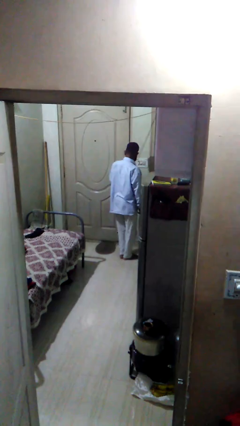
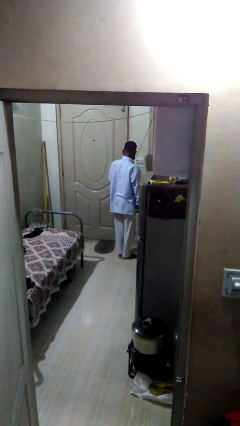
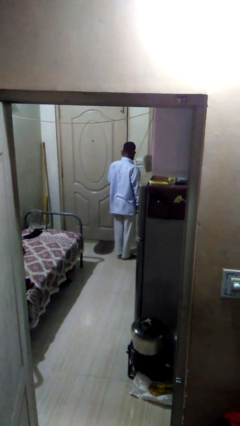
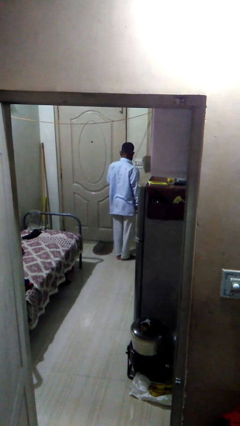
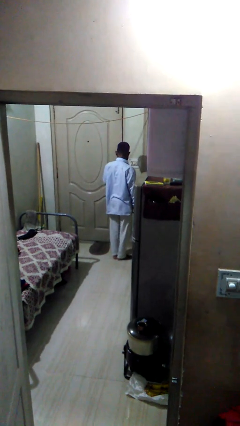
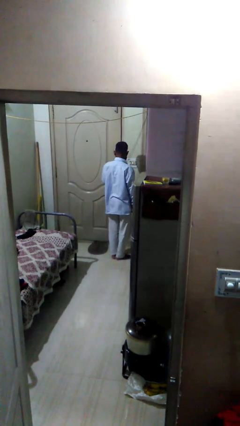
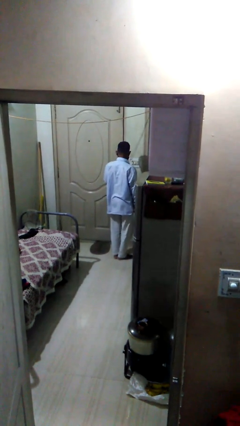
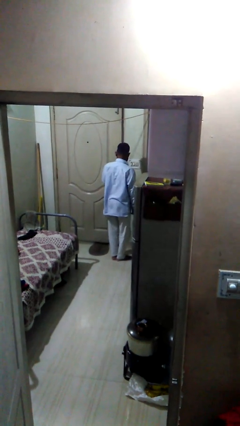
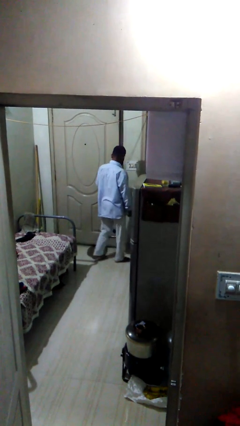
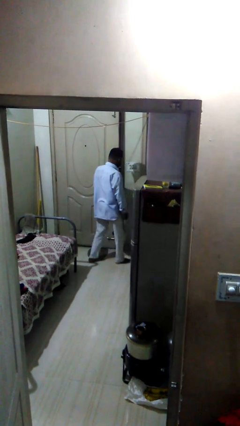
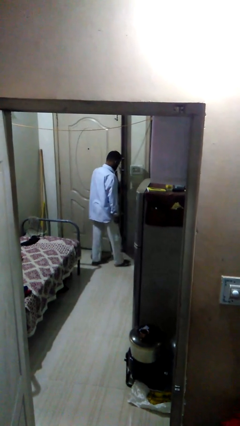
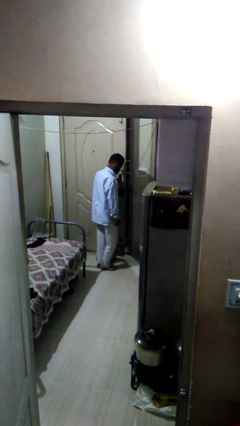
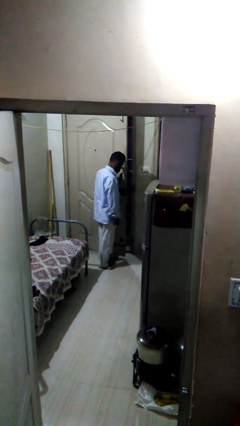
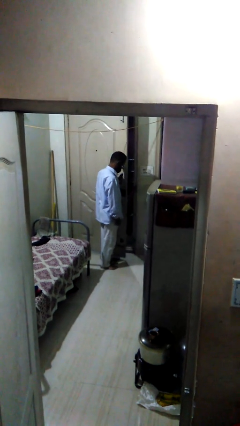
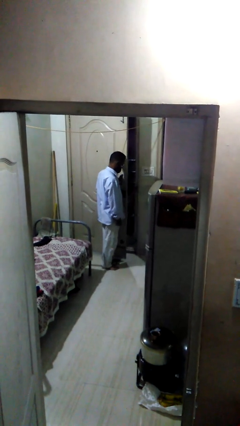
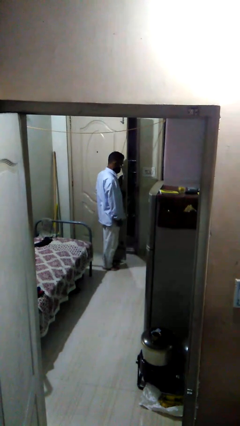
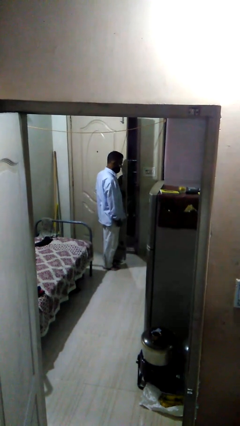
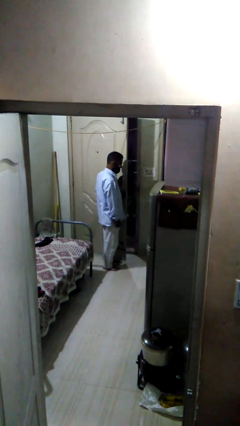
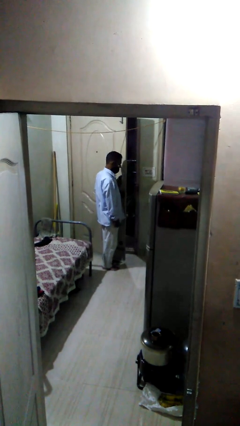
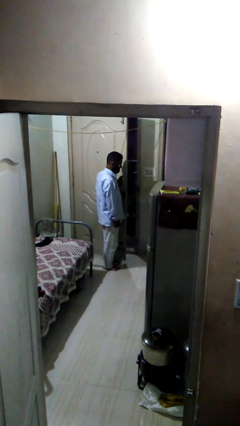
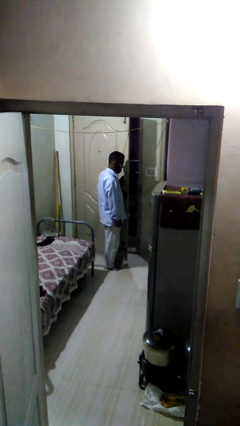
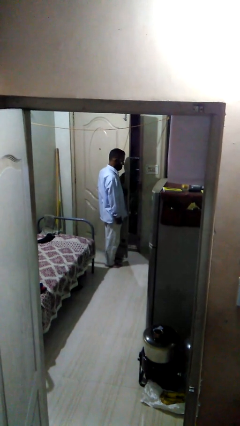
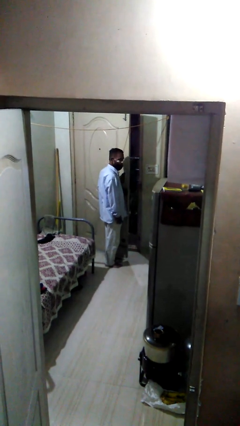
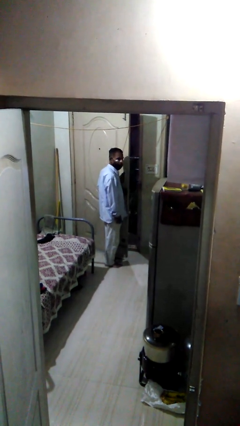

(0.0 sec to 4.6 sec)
person opens facility door

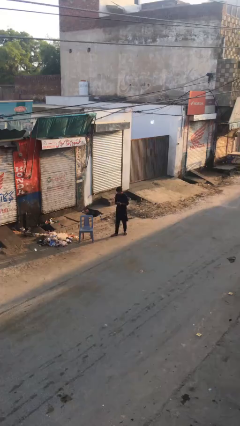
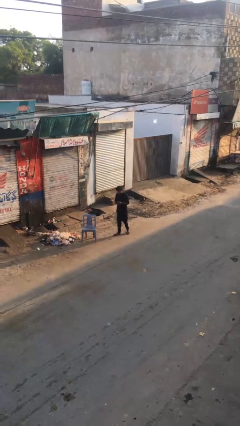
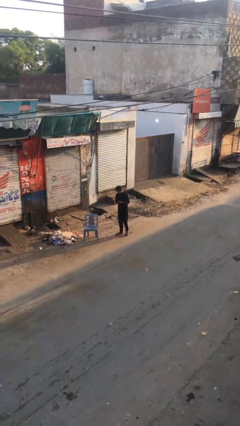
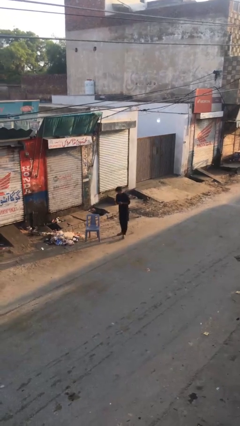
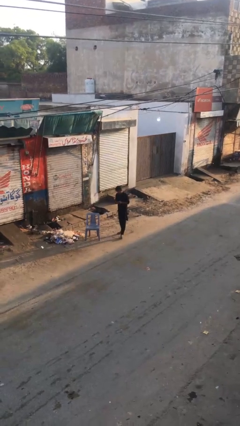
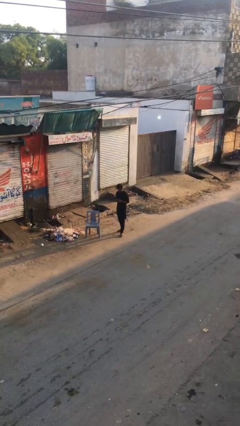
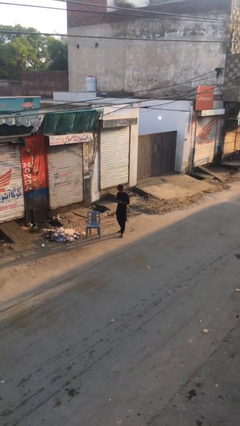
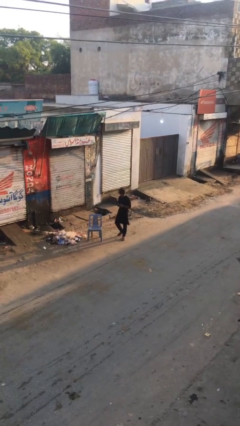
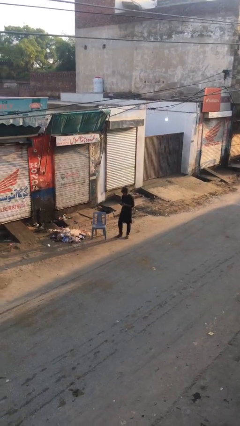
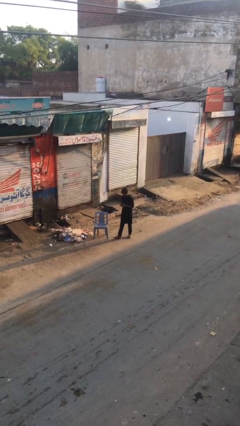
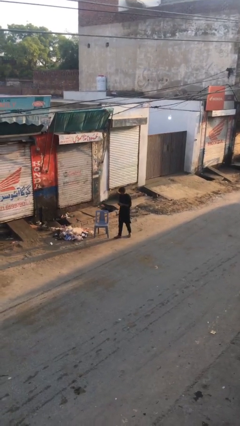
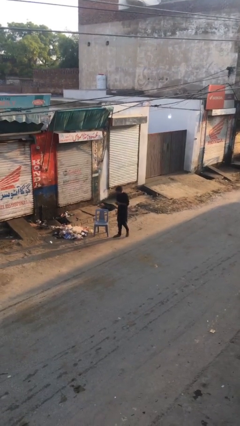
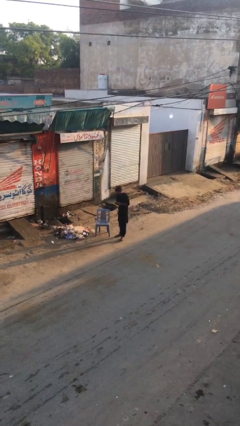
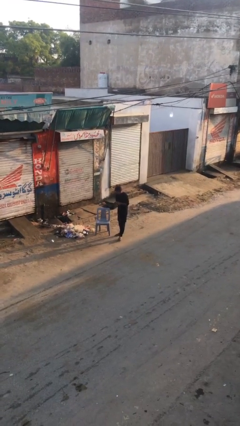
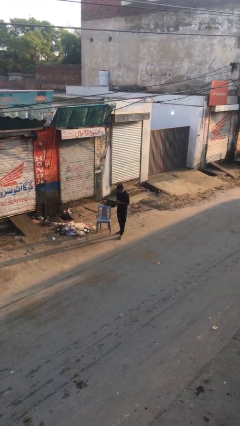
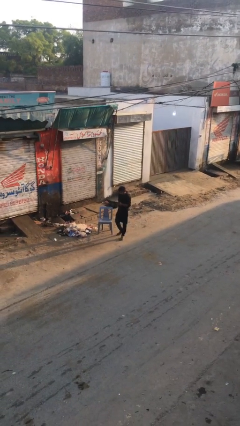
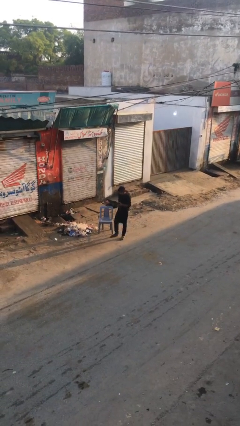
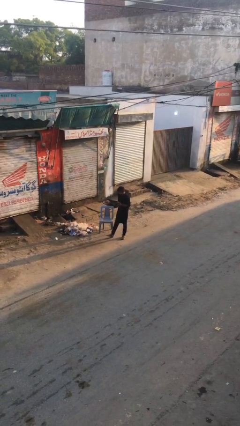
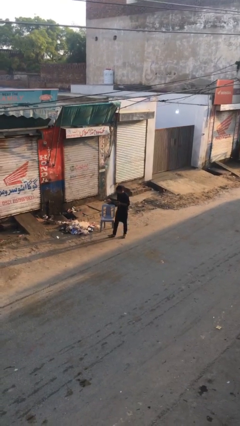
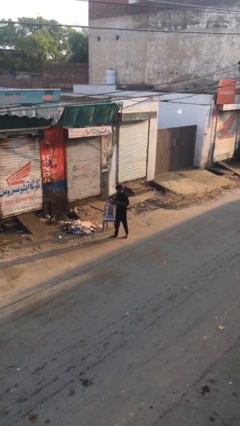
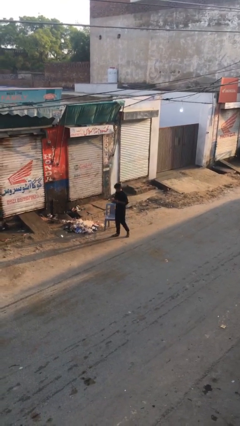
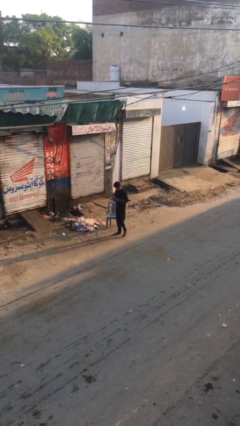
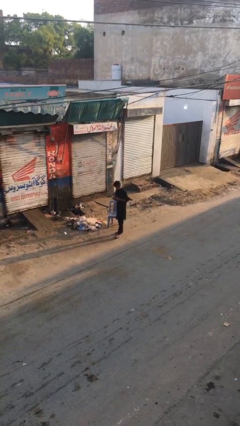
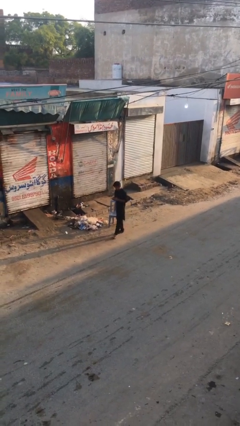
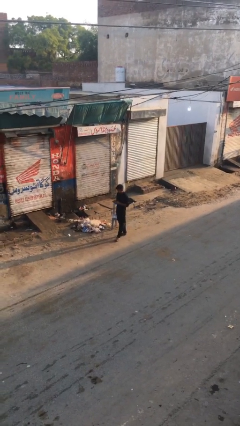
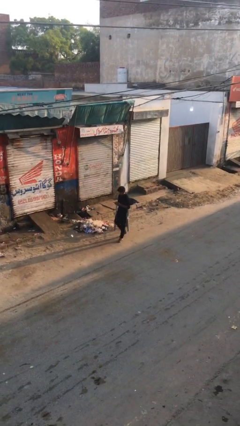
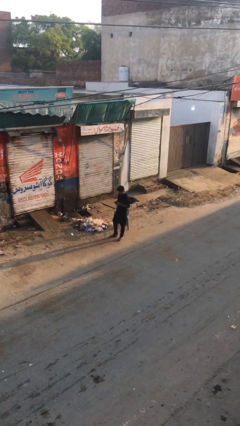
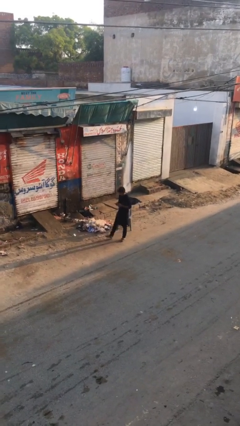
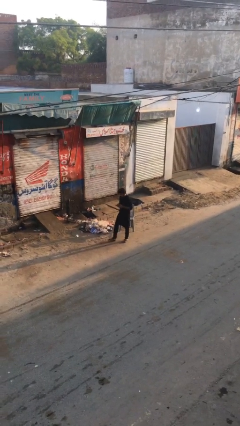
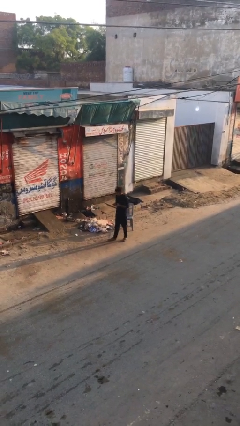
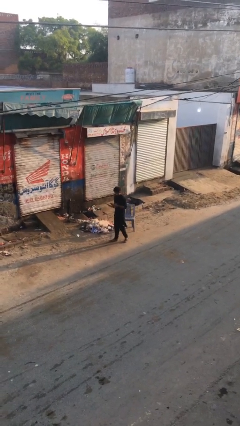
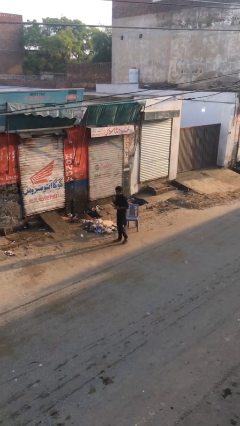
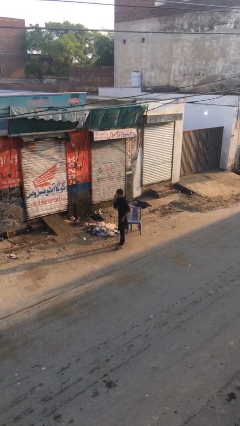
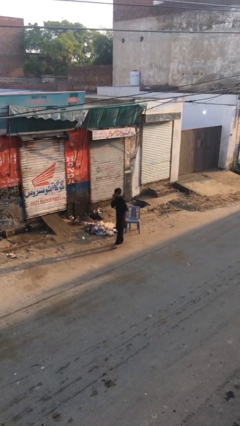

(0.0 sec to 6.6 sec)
person texts on phone

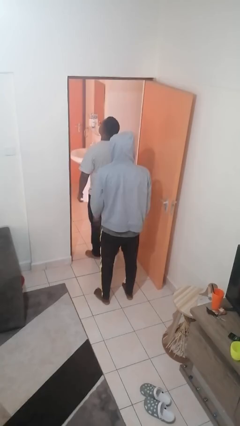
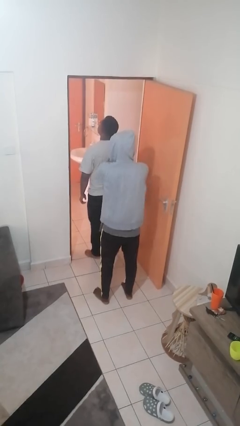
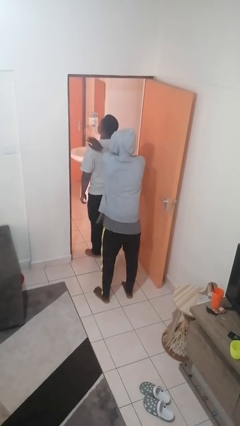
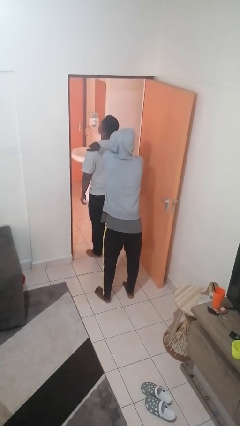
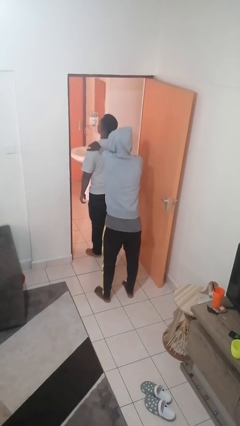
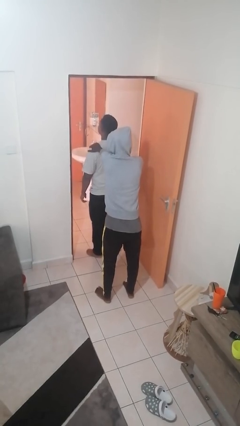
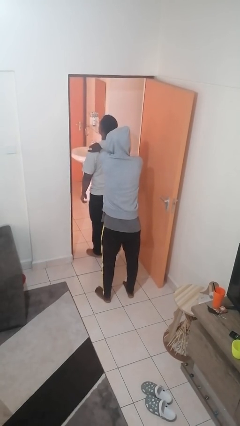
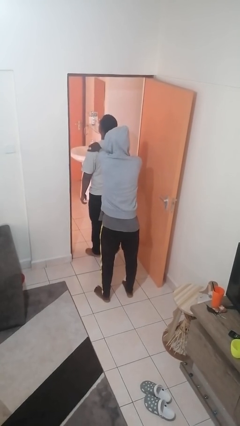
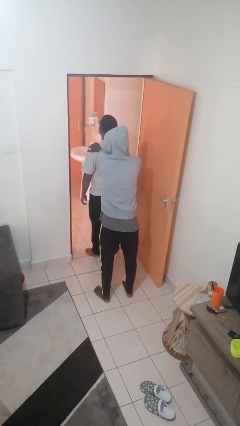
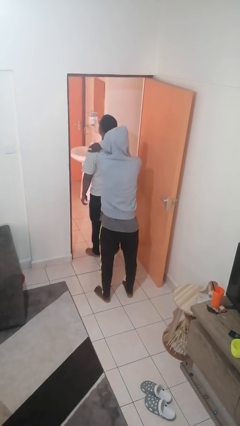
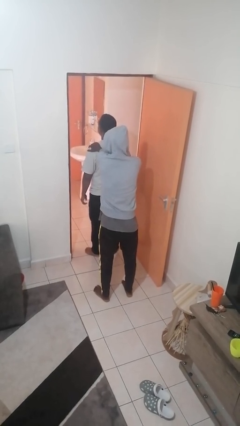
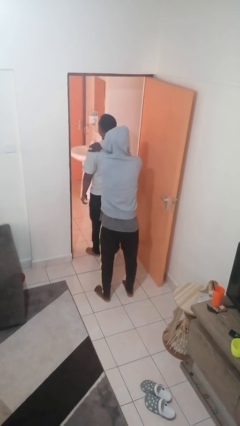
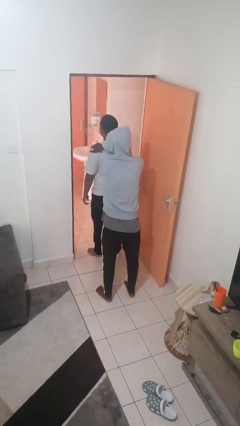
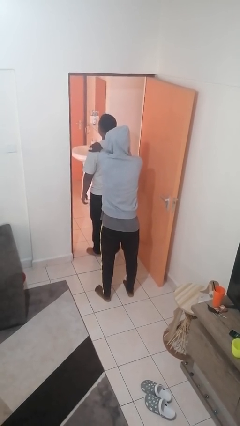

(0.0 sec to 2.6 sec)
person grabs person by shoulder

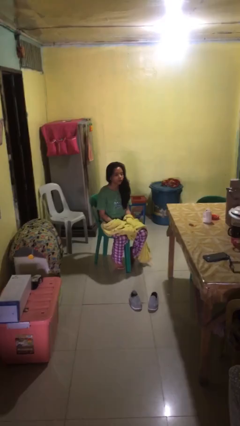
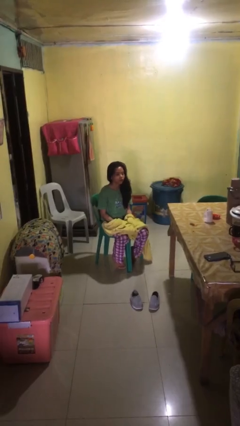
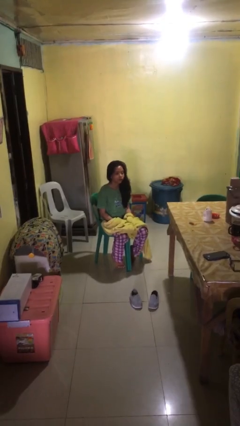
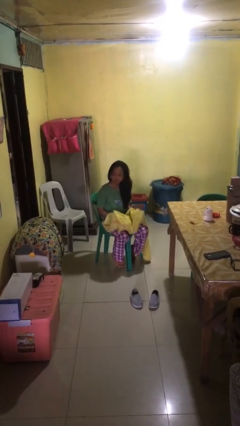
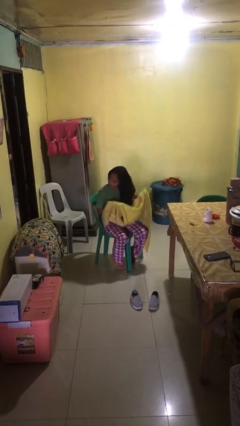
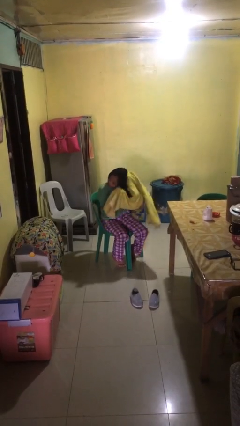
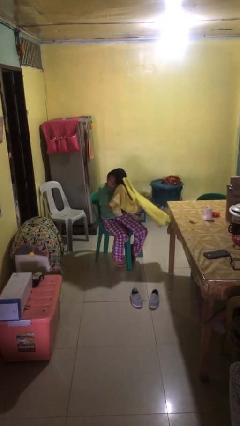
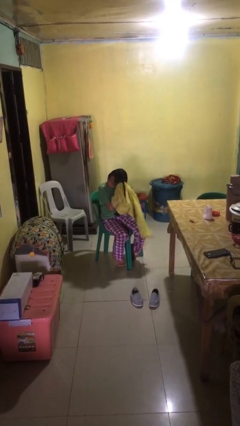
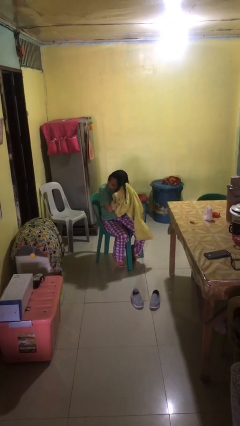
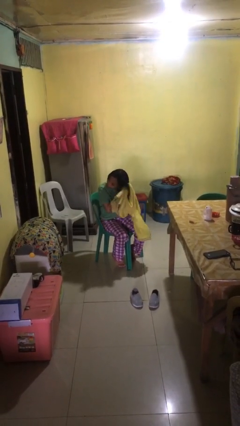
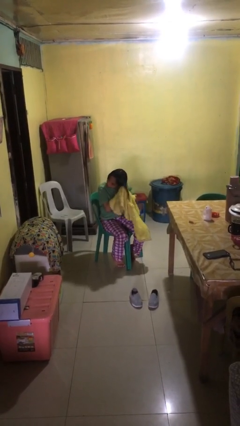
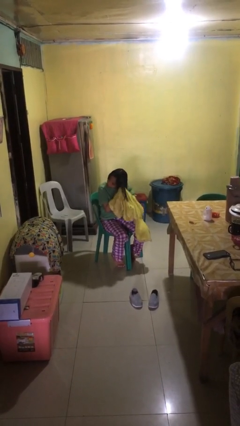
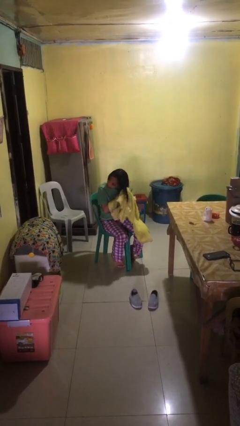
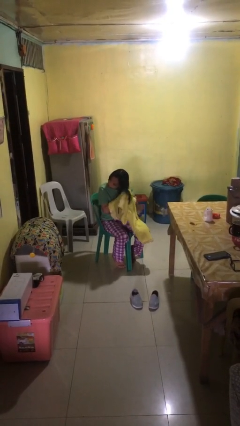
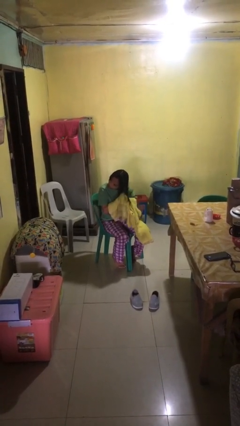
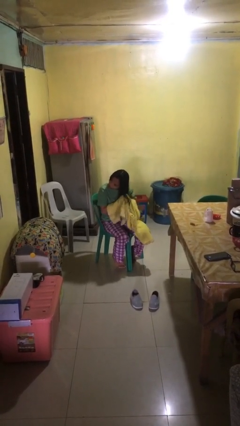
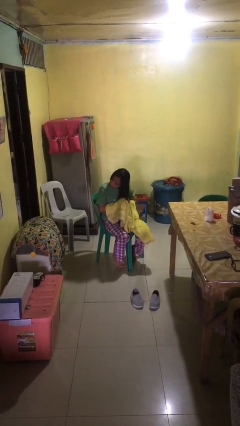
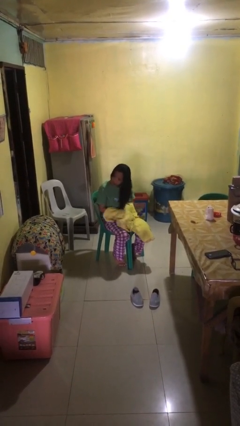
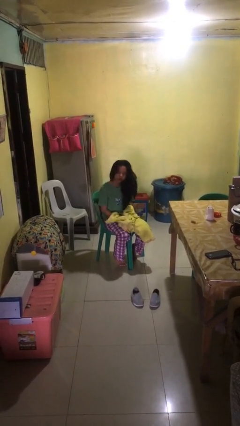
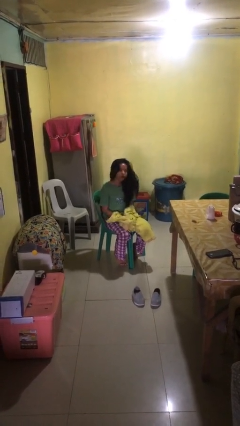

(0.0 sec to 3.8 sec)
person dries hair with towel

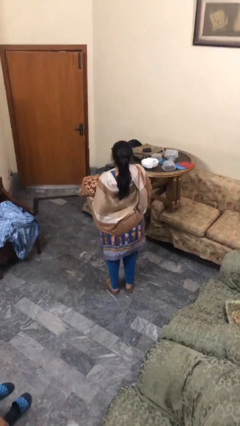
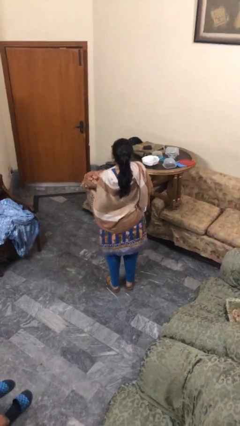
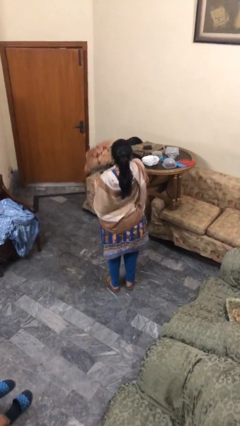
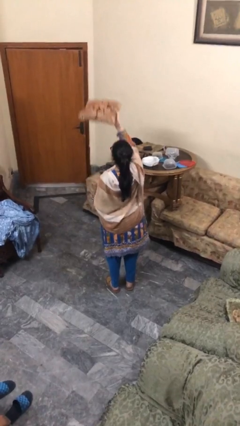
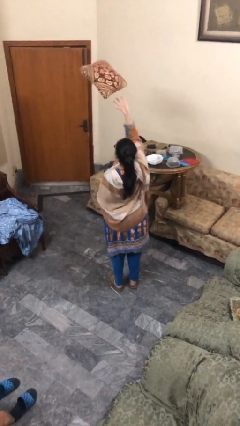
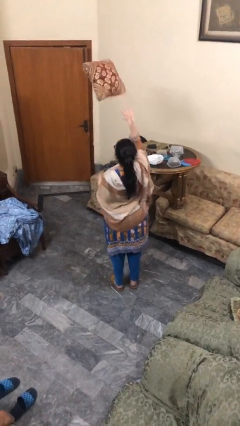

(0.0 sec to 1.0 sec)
person drops object
